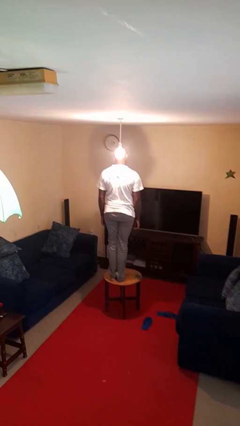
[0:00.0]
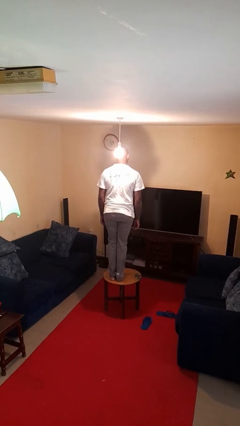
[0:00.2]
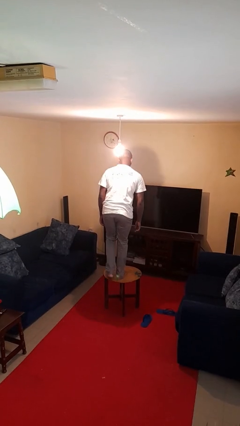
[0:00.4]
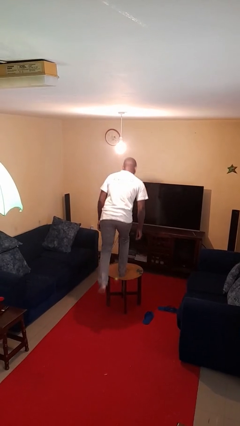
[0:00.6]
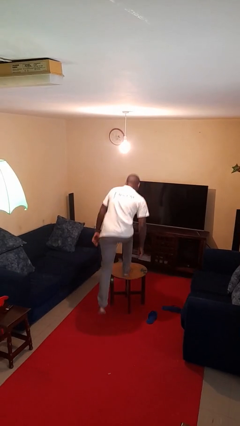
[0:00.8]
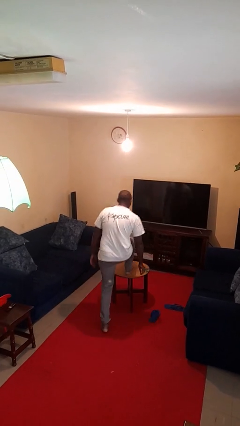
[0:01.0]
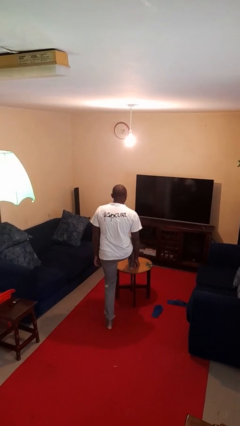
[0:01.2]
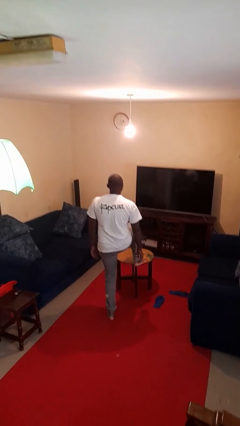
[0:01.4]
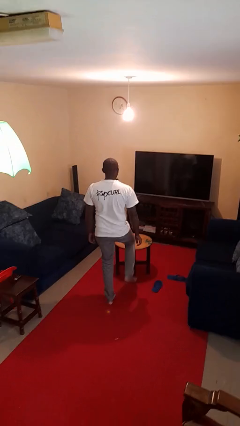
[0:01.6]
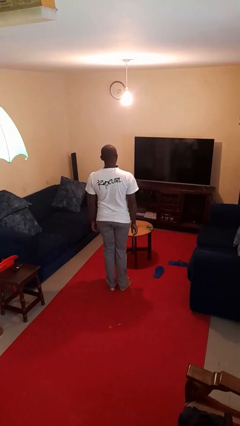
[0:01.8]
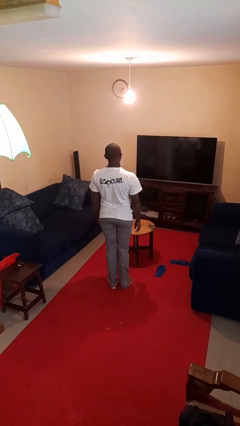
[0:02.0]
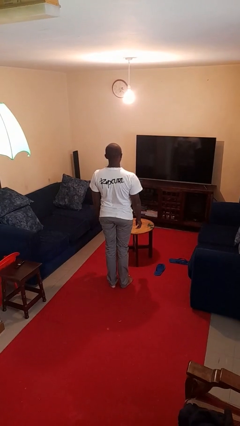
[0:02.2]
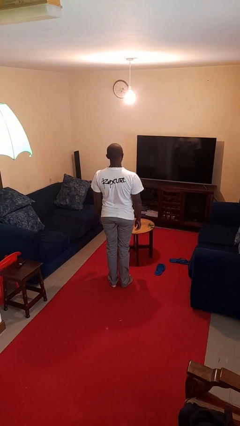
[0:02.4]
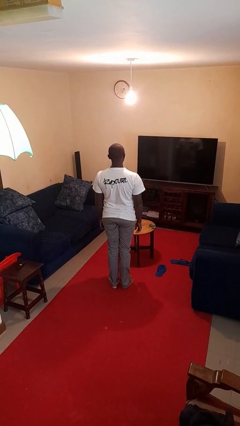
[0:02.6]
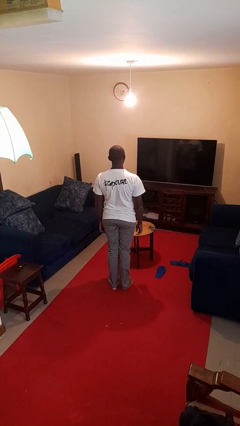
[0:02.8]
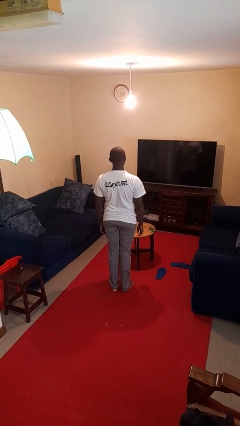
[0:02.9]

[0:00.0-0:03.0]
person climbs off table

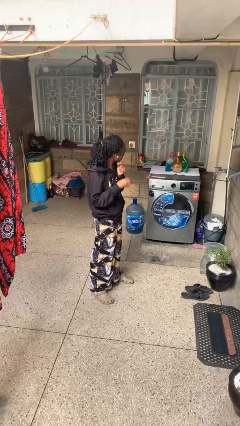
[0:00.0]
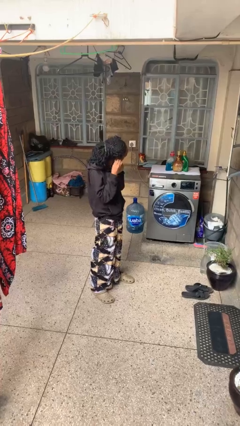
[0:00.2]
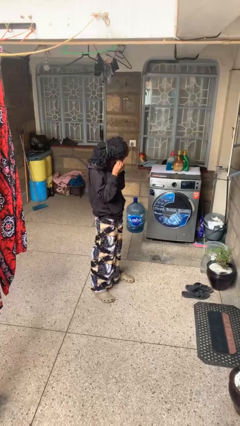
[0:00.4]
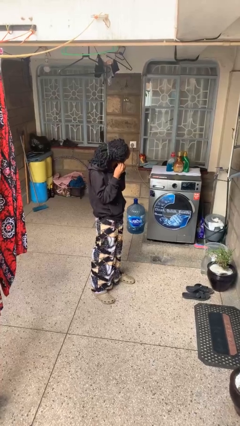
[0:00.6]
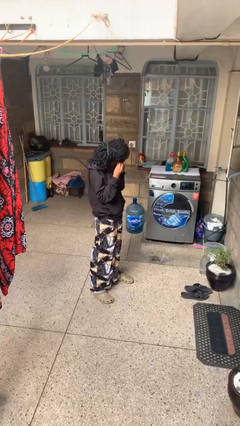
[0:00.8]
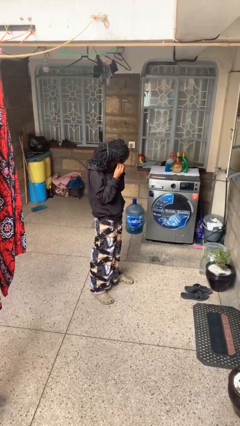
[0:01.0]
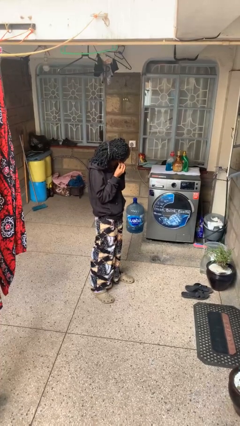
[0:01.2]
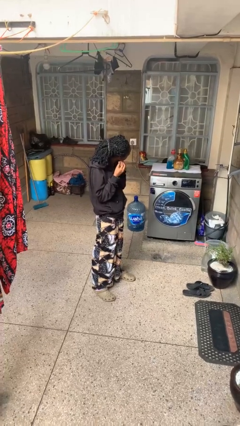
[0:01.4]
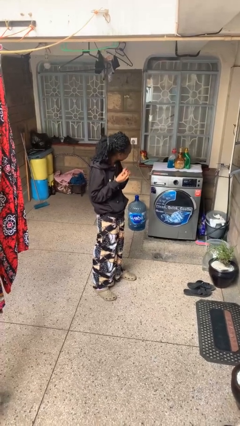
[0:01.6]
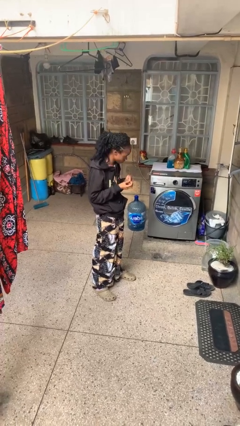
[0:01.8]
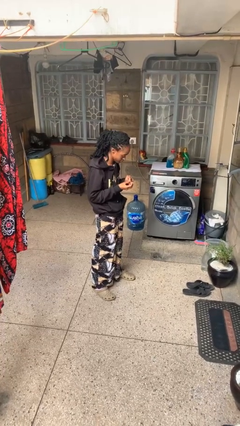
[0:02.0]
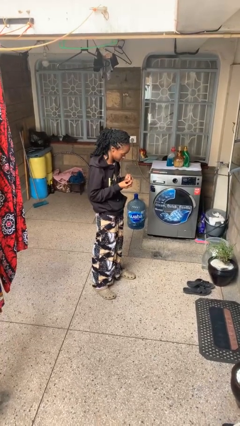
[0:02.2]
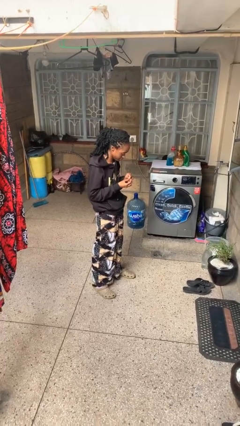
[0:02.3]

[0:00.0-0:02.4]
person takes off earrings

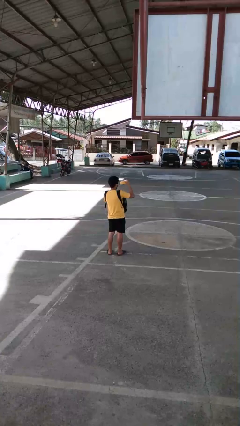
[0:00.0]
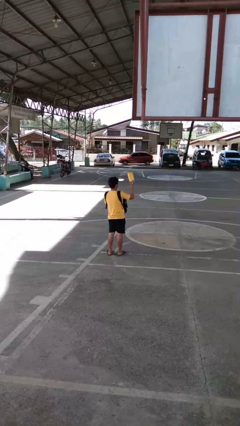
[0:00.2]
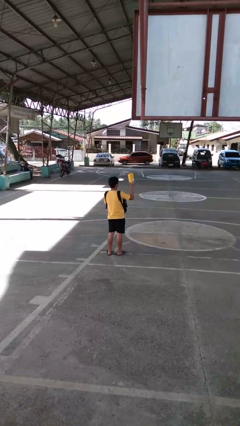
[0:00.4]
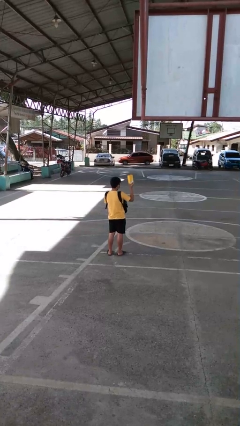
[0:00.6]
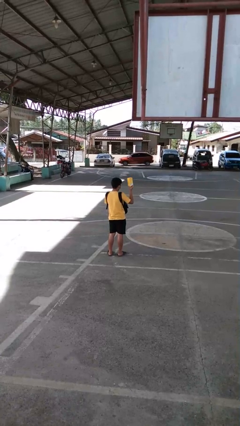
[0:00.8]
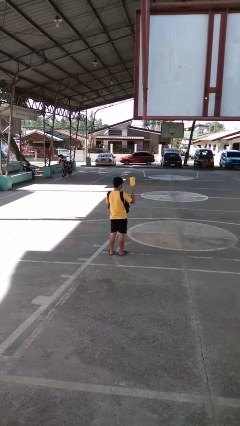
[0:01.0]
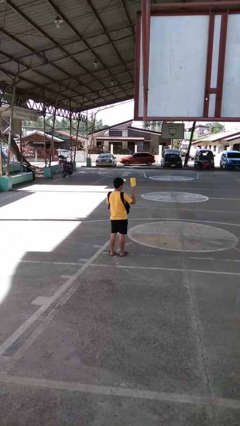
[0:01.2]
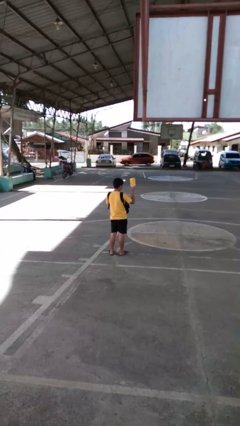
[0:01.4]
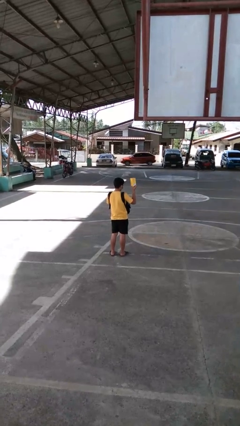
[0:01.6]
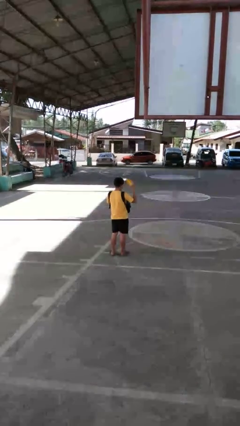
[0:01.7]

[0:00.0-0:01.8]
person takes object from backpack

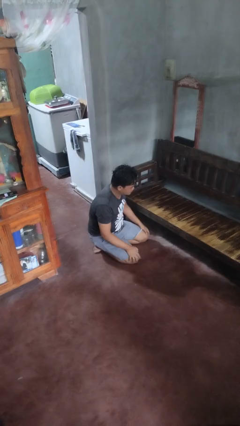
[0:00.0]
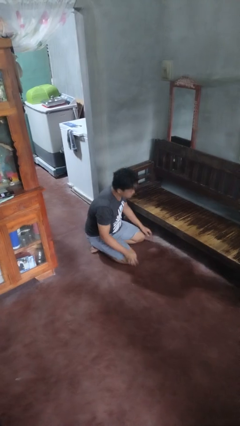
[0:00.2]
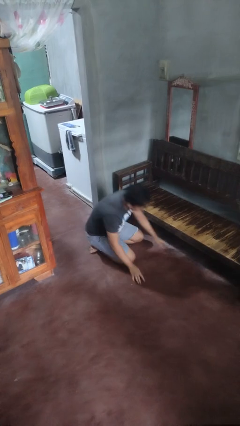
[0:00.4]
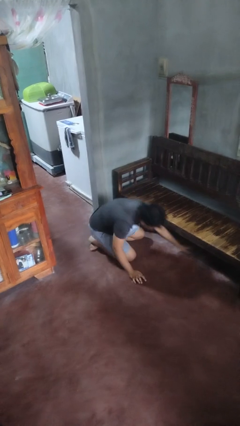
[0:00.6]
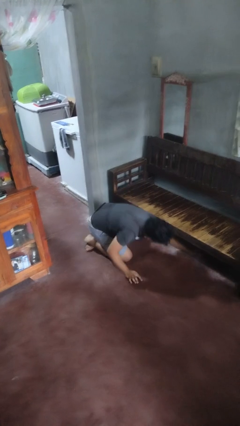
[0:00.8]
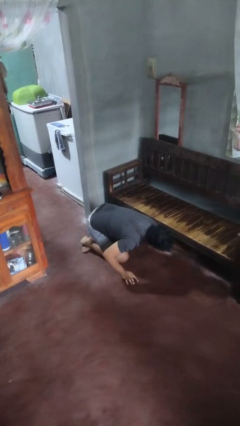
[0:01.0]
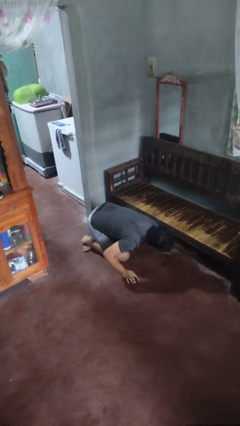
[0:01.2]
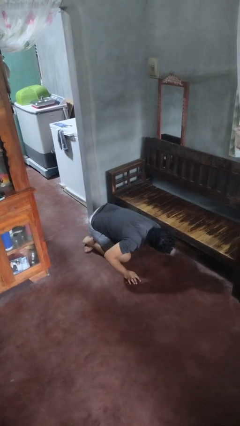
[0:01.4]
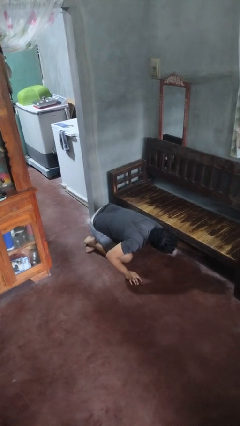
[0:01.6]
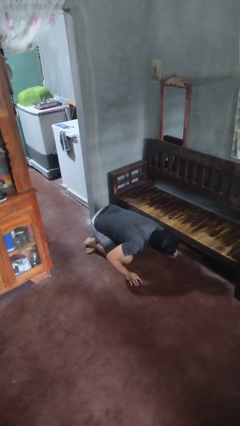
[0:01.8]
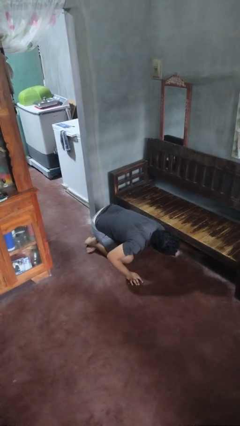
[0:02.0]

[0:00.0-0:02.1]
person searches under couch

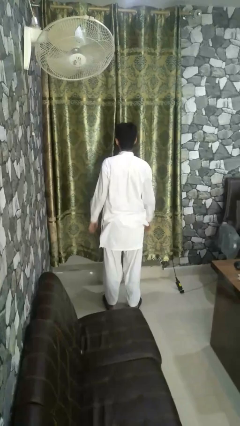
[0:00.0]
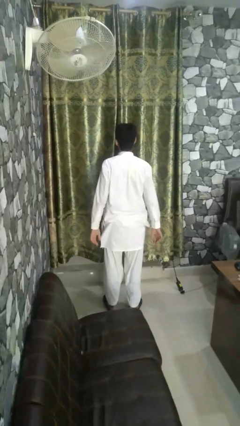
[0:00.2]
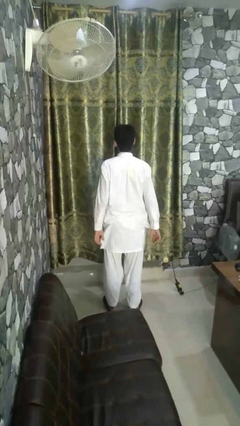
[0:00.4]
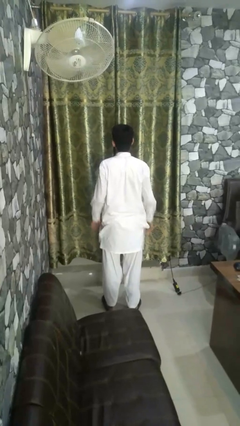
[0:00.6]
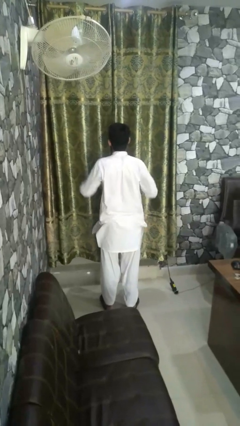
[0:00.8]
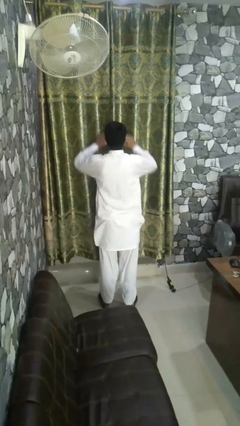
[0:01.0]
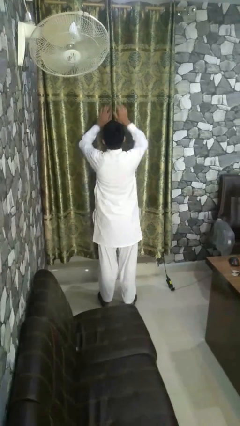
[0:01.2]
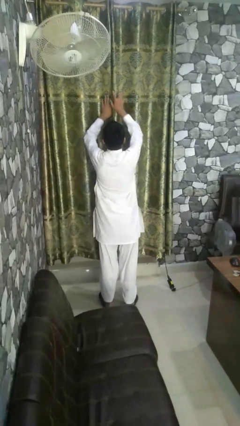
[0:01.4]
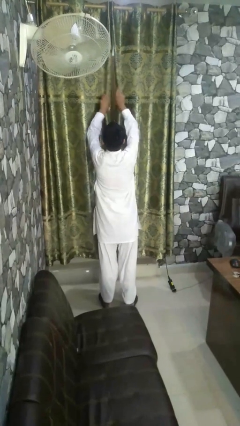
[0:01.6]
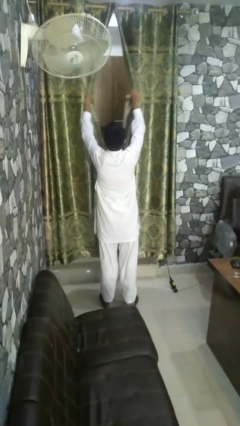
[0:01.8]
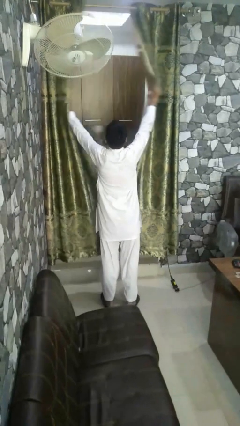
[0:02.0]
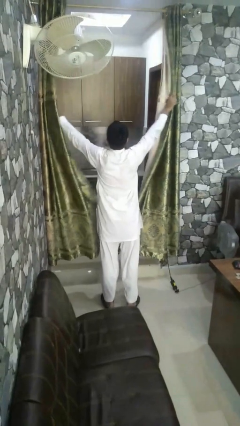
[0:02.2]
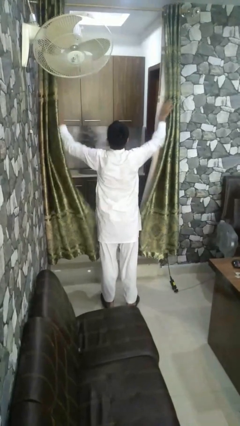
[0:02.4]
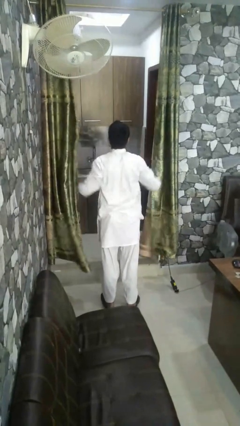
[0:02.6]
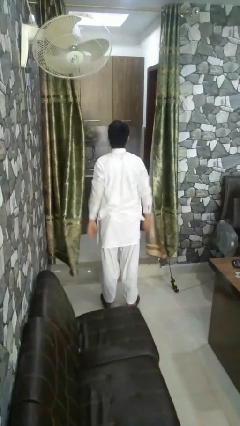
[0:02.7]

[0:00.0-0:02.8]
person opens curtains

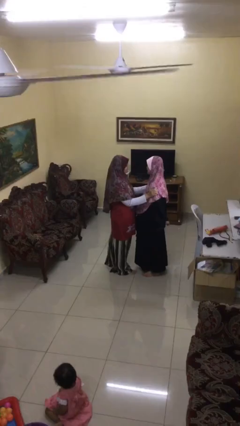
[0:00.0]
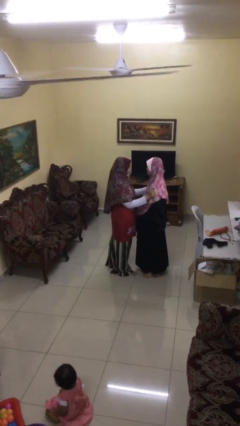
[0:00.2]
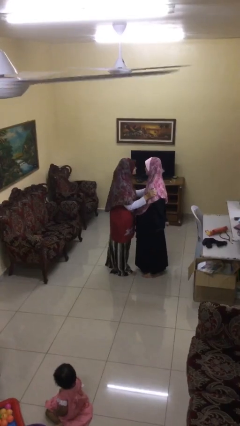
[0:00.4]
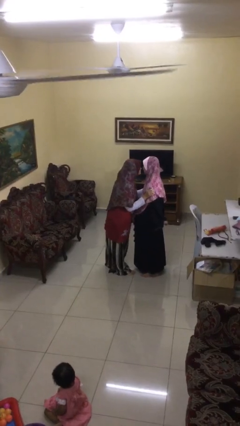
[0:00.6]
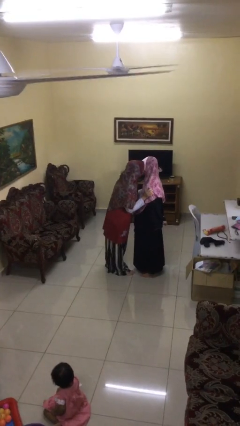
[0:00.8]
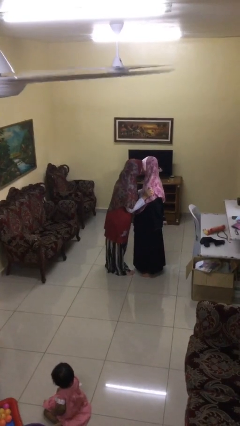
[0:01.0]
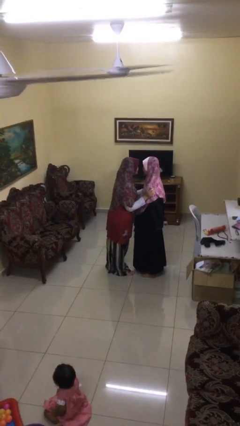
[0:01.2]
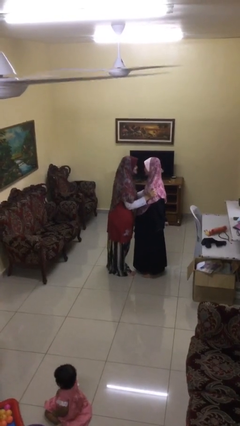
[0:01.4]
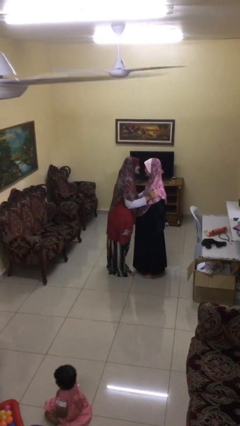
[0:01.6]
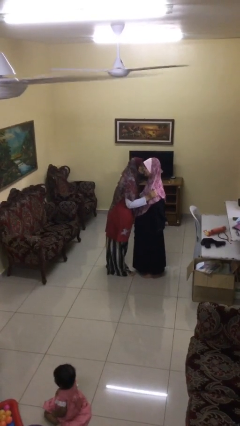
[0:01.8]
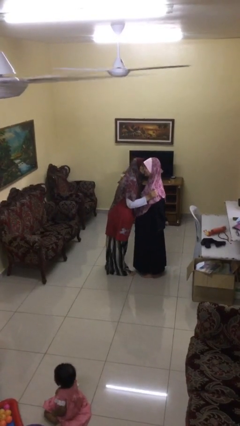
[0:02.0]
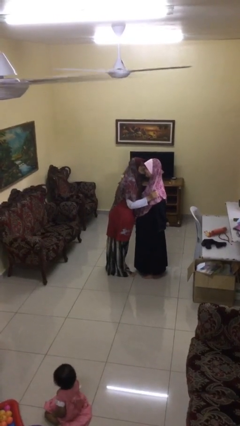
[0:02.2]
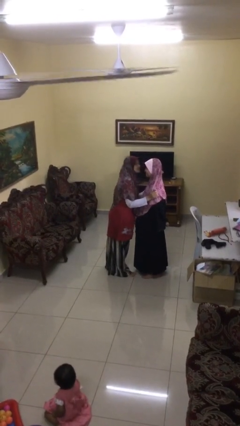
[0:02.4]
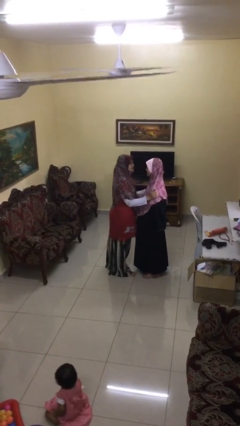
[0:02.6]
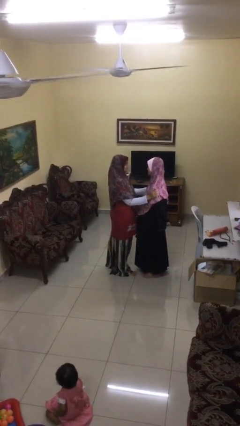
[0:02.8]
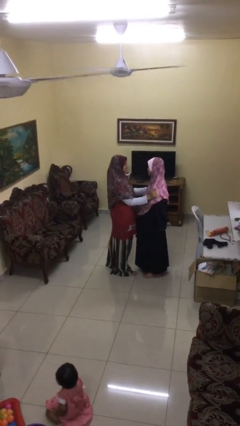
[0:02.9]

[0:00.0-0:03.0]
person kisses cheek of person

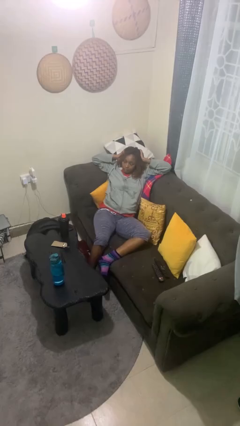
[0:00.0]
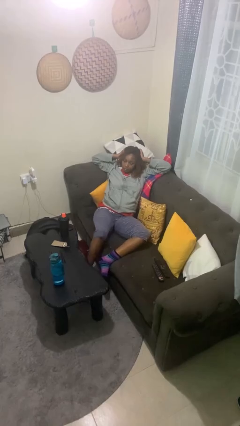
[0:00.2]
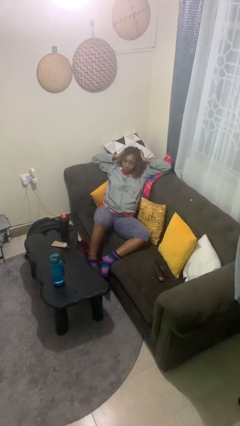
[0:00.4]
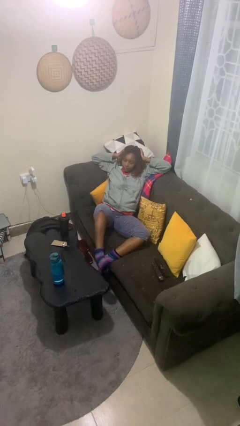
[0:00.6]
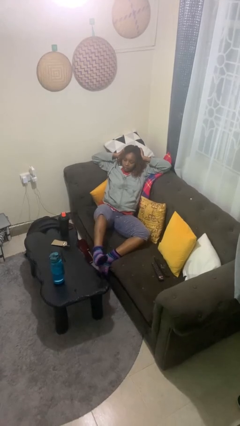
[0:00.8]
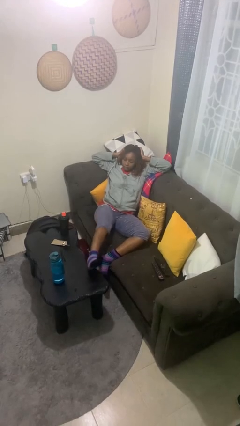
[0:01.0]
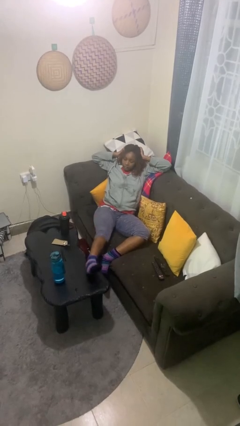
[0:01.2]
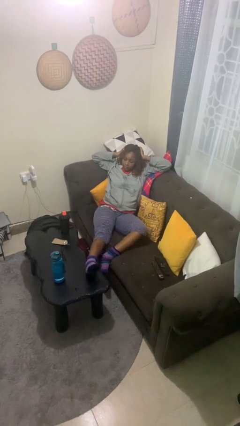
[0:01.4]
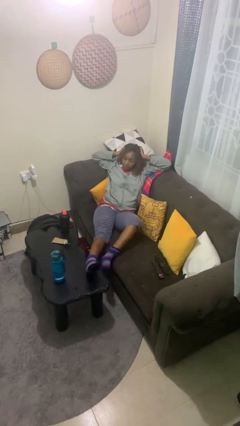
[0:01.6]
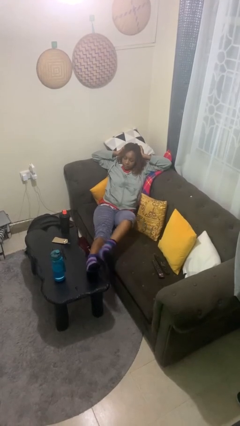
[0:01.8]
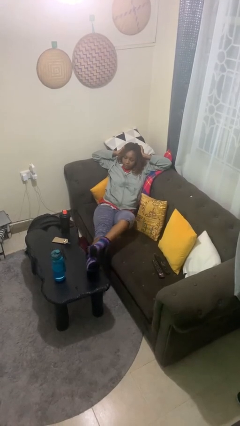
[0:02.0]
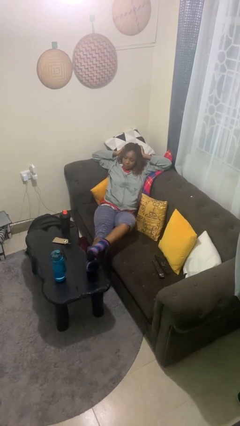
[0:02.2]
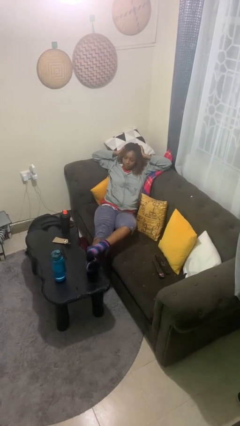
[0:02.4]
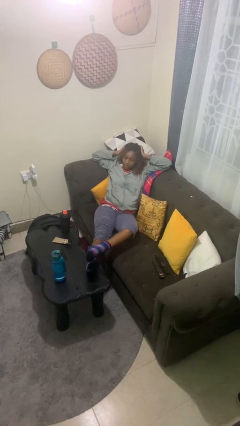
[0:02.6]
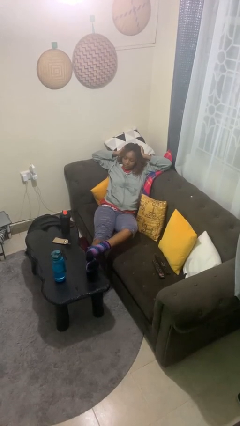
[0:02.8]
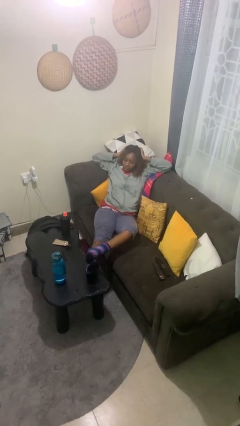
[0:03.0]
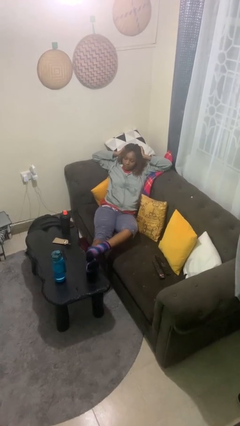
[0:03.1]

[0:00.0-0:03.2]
person puts feet up
